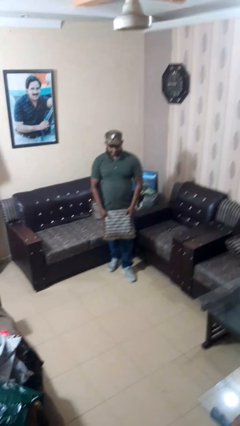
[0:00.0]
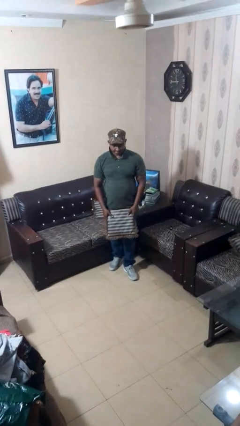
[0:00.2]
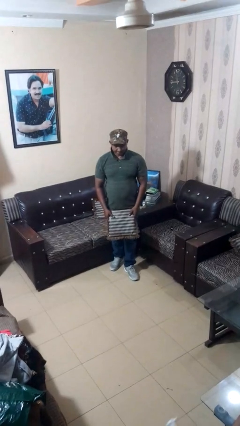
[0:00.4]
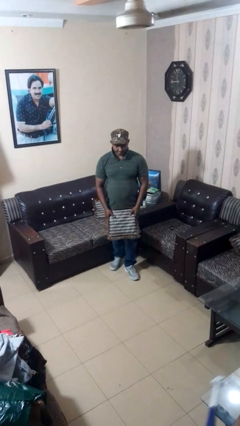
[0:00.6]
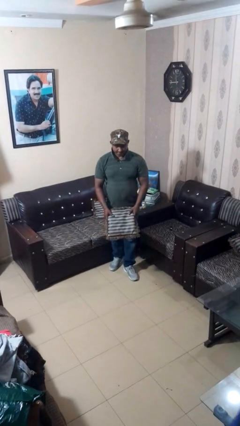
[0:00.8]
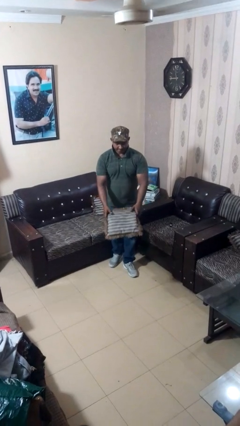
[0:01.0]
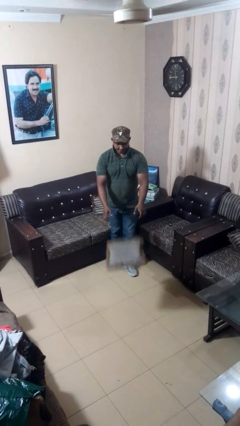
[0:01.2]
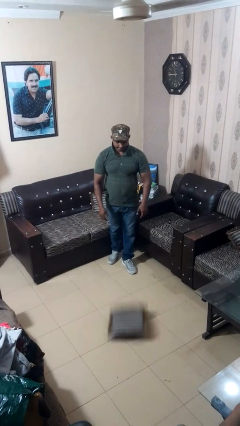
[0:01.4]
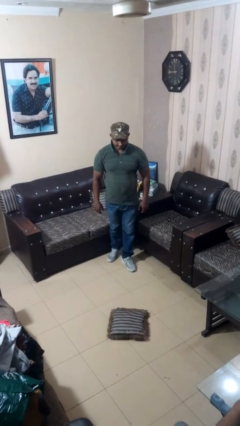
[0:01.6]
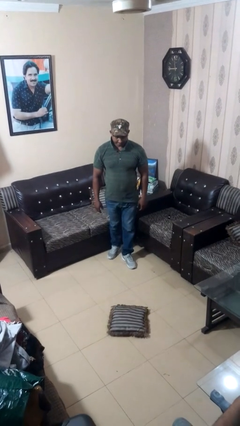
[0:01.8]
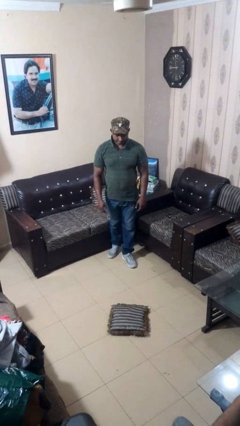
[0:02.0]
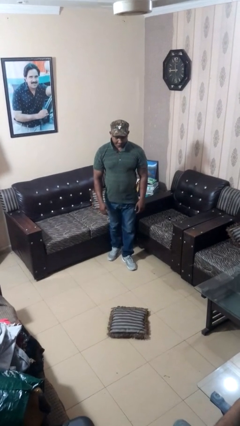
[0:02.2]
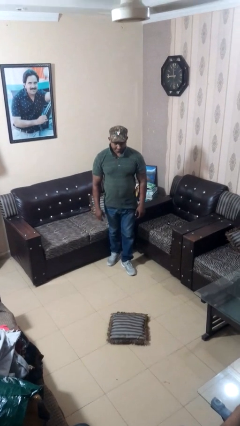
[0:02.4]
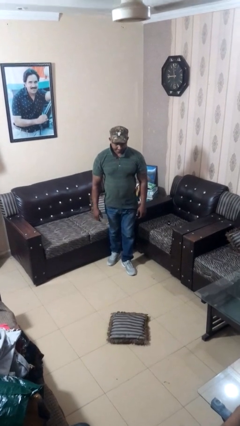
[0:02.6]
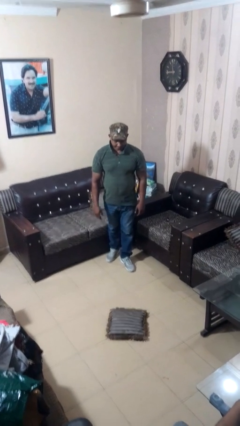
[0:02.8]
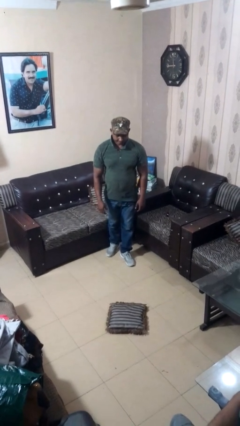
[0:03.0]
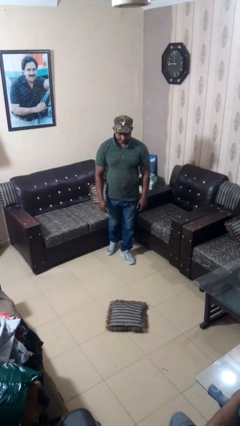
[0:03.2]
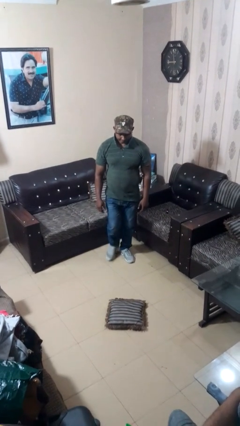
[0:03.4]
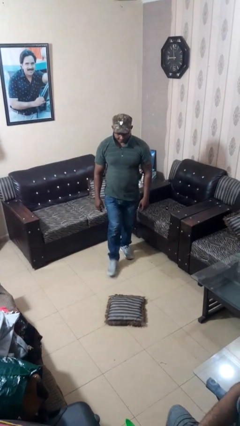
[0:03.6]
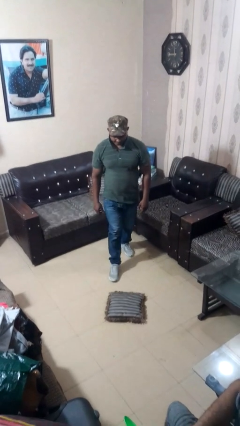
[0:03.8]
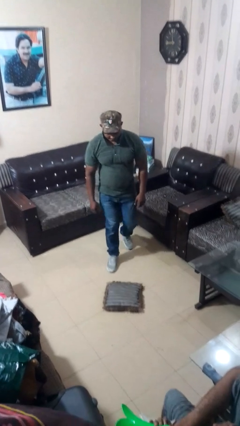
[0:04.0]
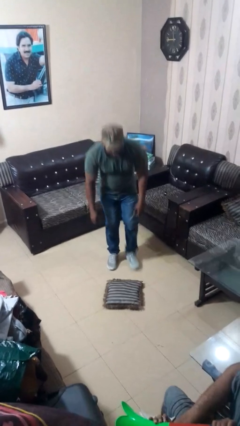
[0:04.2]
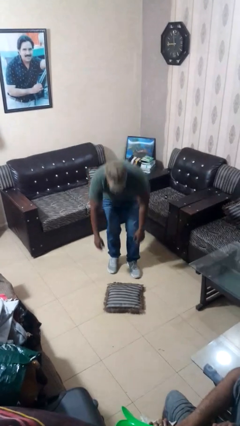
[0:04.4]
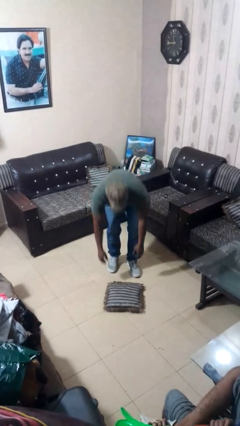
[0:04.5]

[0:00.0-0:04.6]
person throws object to ground

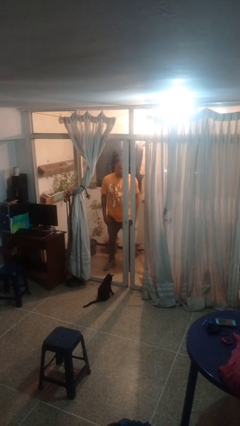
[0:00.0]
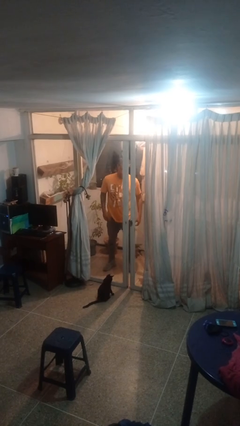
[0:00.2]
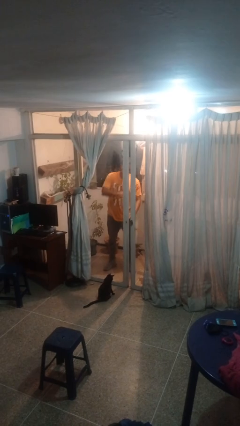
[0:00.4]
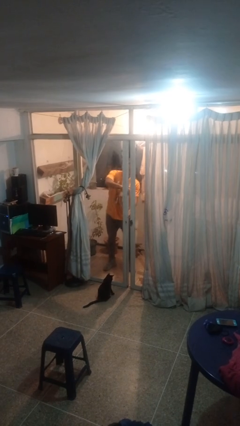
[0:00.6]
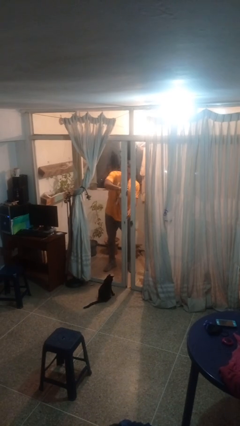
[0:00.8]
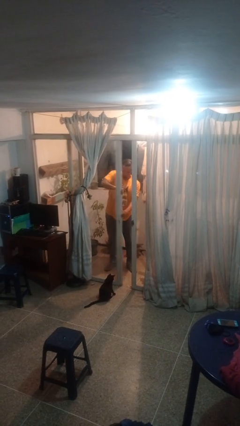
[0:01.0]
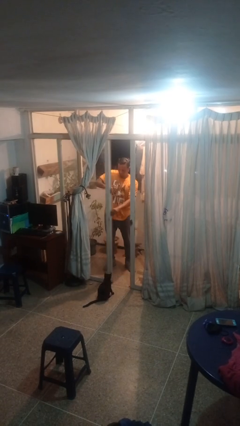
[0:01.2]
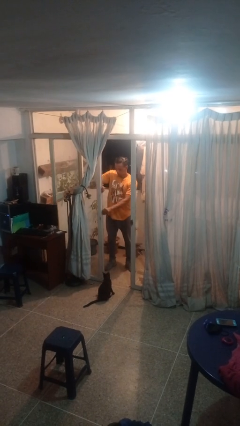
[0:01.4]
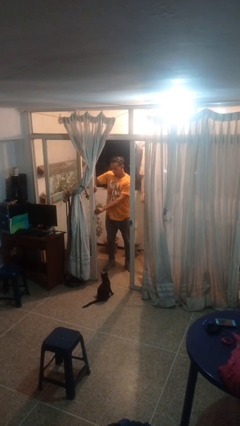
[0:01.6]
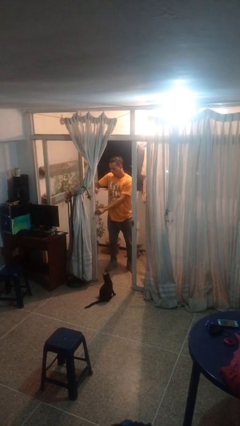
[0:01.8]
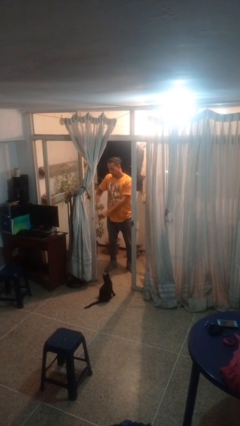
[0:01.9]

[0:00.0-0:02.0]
person opens sliding door

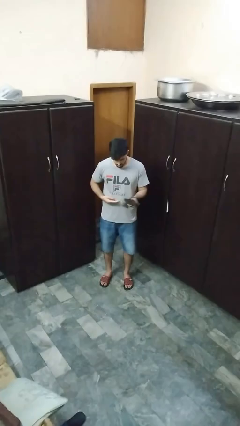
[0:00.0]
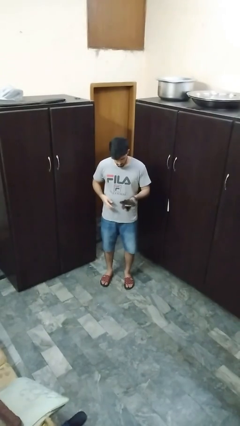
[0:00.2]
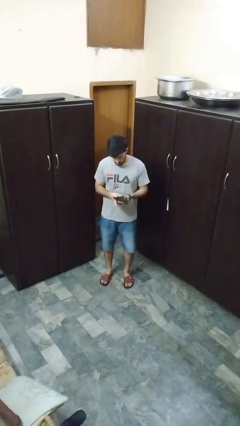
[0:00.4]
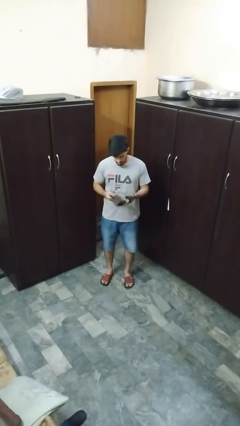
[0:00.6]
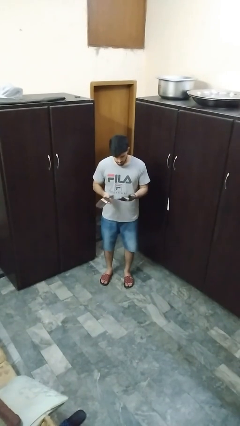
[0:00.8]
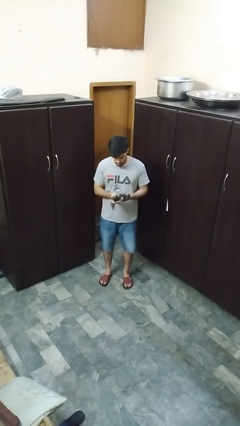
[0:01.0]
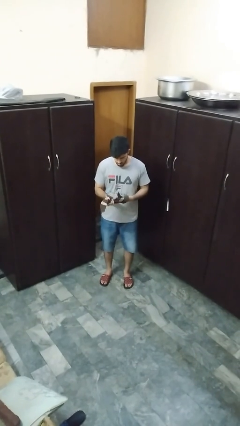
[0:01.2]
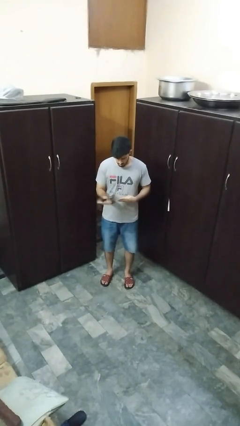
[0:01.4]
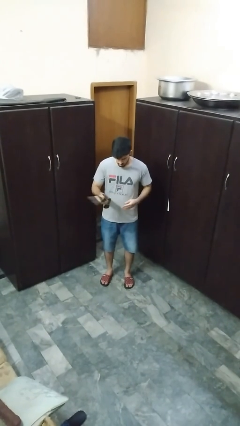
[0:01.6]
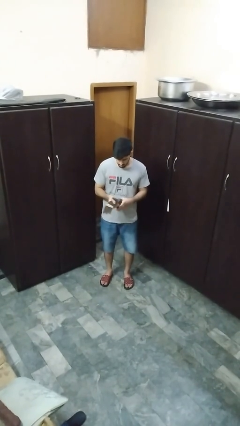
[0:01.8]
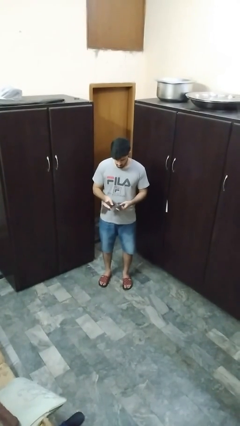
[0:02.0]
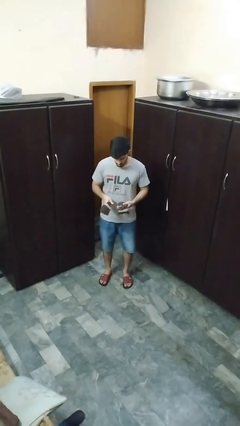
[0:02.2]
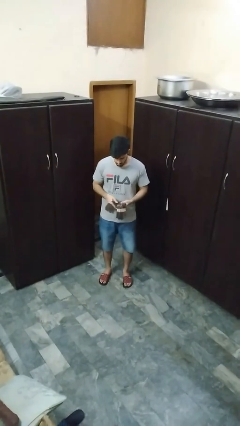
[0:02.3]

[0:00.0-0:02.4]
person takes off gloves

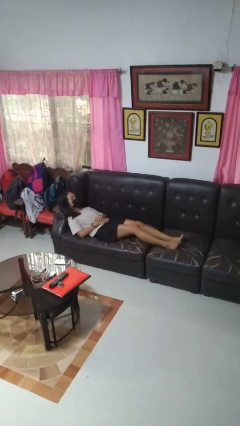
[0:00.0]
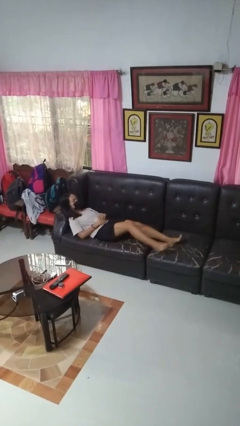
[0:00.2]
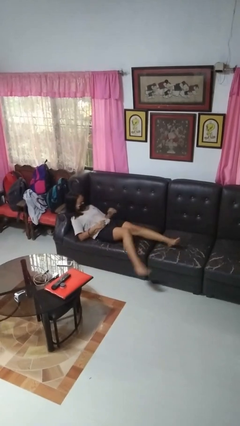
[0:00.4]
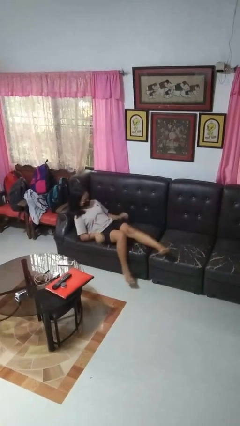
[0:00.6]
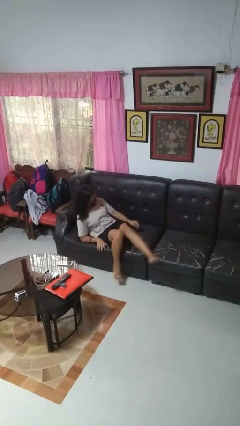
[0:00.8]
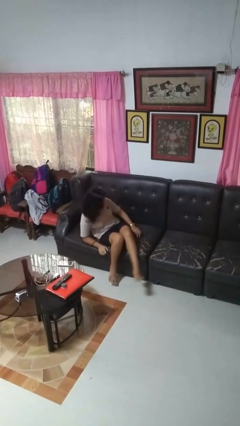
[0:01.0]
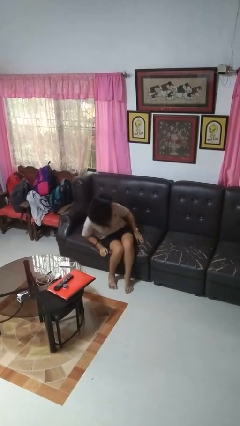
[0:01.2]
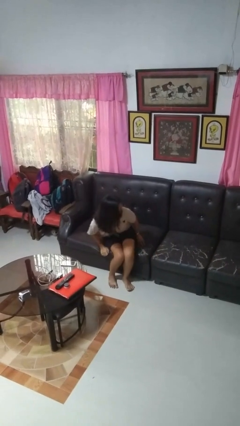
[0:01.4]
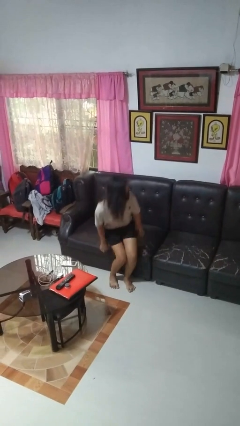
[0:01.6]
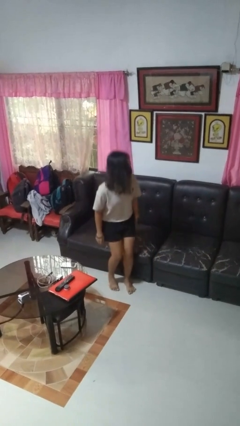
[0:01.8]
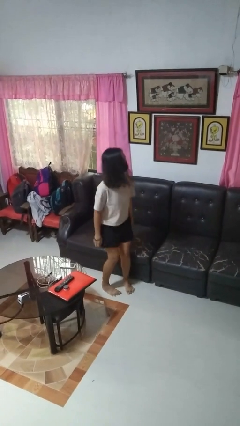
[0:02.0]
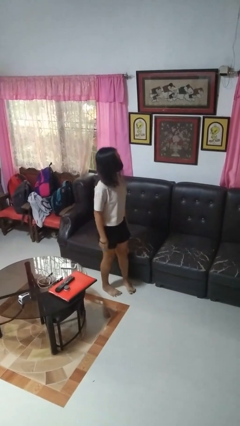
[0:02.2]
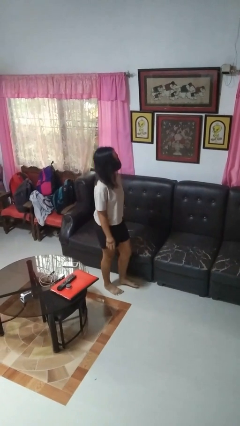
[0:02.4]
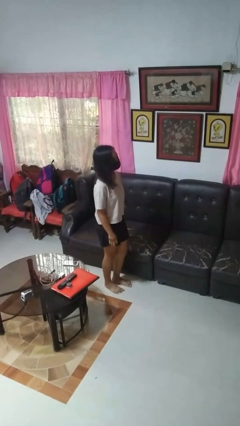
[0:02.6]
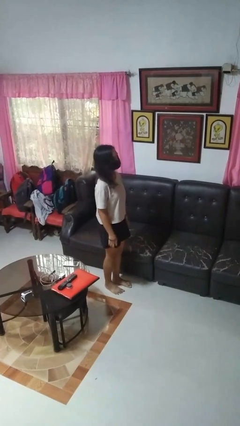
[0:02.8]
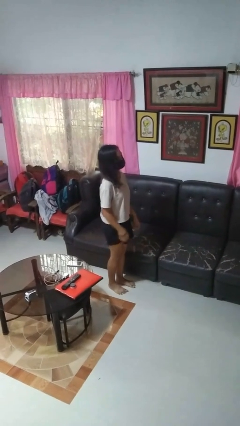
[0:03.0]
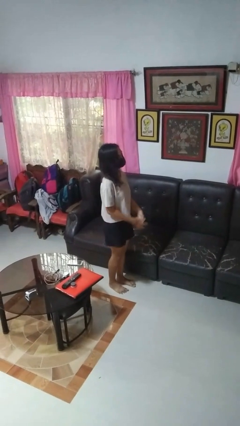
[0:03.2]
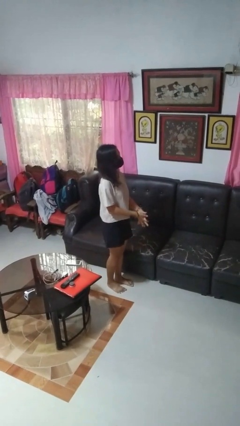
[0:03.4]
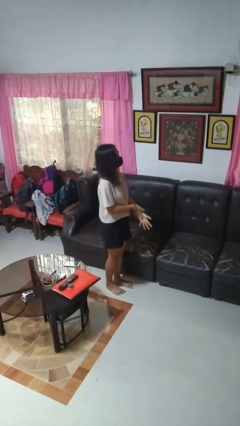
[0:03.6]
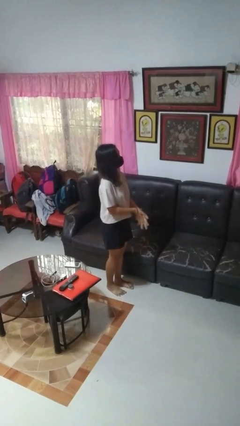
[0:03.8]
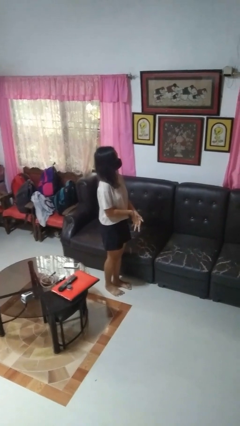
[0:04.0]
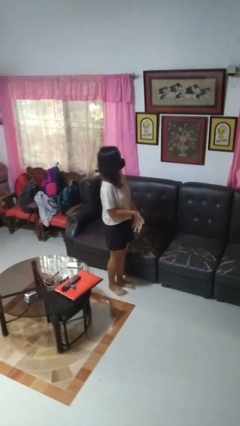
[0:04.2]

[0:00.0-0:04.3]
person stands up

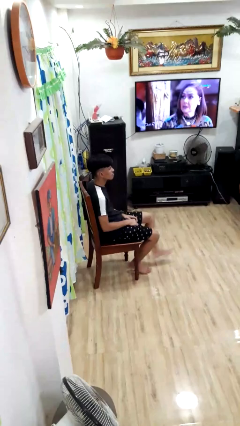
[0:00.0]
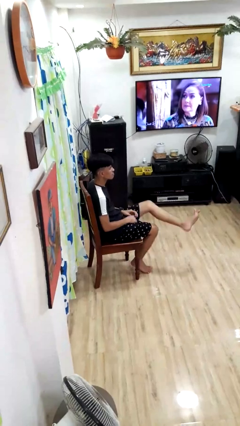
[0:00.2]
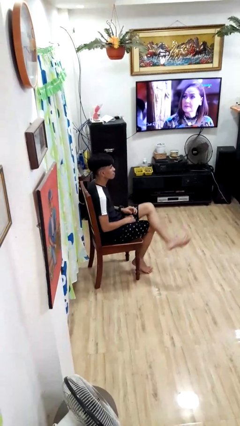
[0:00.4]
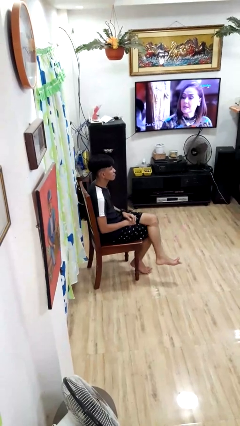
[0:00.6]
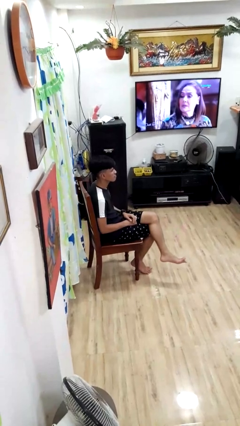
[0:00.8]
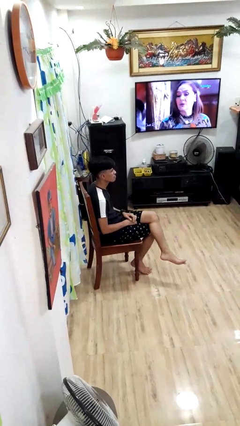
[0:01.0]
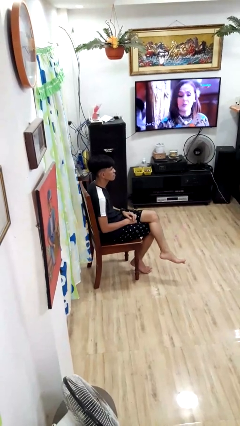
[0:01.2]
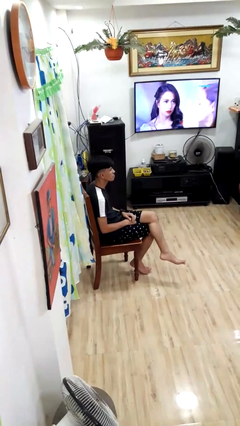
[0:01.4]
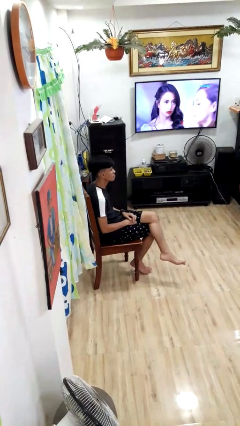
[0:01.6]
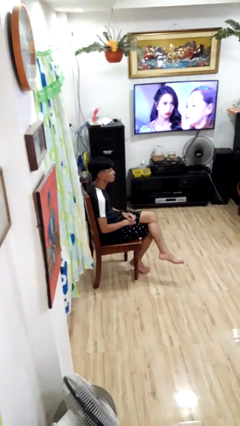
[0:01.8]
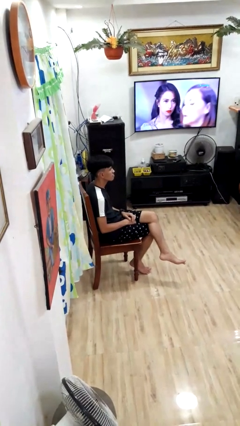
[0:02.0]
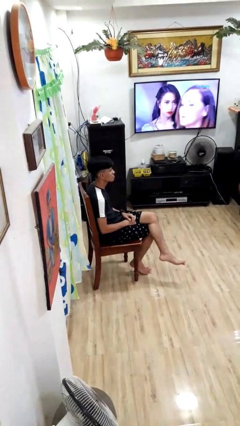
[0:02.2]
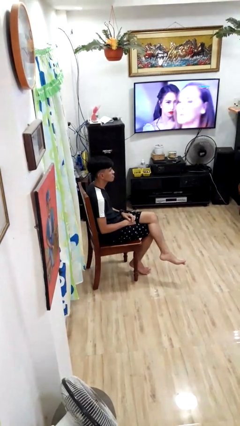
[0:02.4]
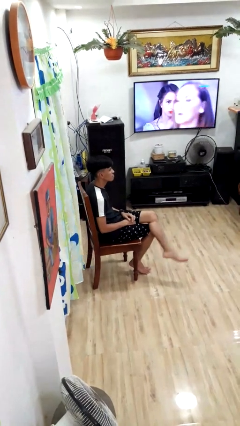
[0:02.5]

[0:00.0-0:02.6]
person crosses legs

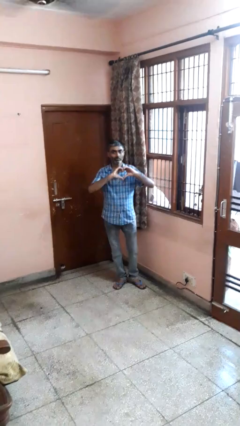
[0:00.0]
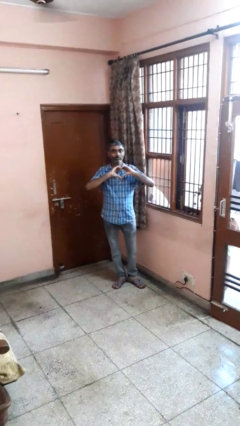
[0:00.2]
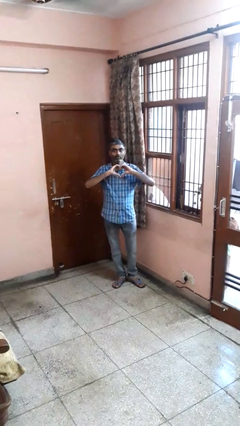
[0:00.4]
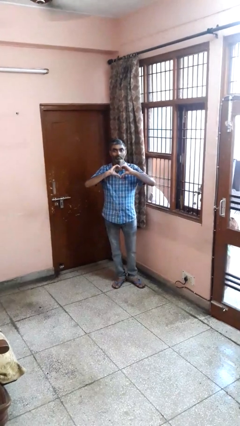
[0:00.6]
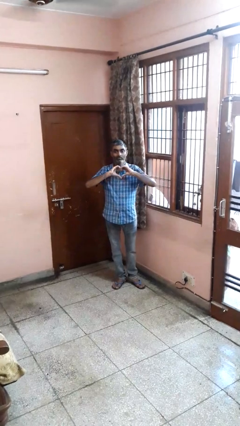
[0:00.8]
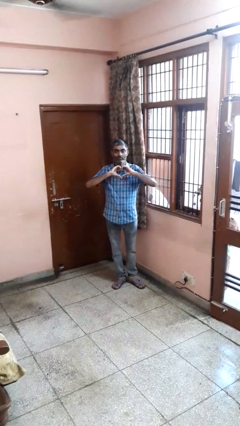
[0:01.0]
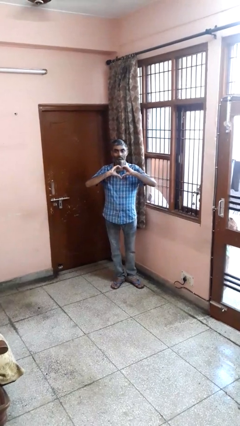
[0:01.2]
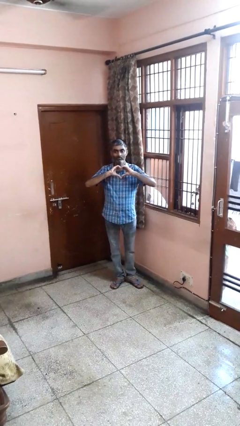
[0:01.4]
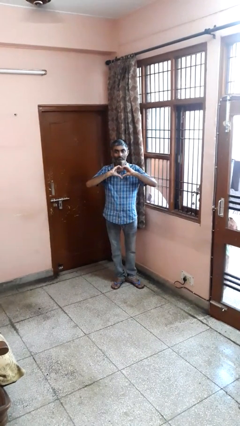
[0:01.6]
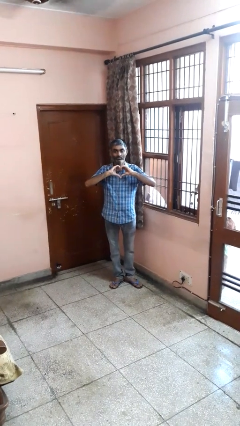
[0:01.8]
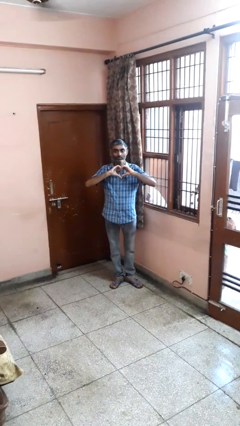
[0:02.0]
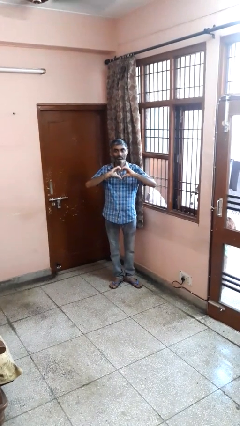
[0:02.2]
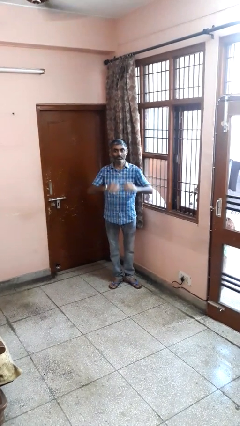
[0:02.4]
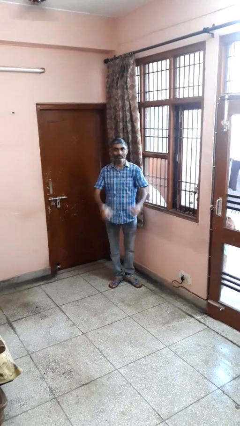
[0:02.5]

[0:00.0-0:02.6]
person gestures heart
